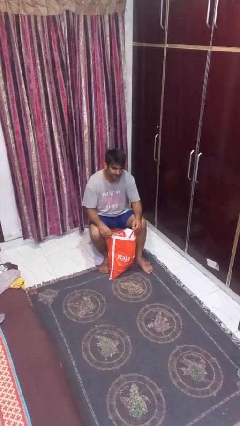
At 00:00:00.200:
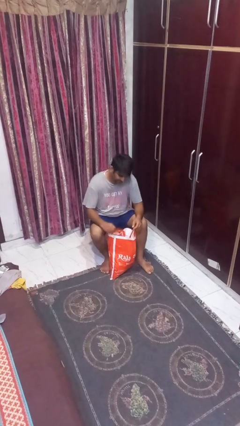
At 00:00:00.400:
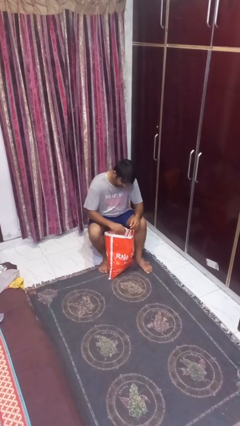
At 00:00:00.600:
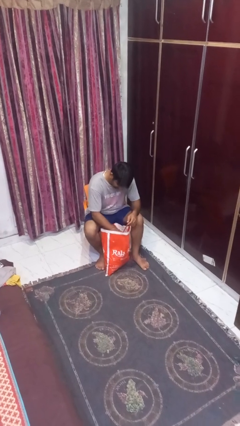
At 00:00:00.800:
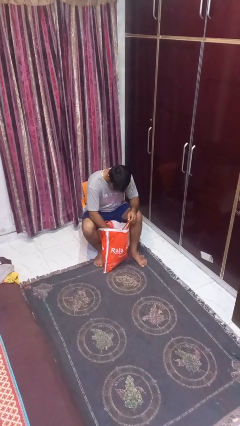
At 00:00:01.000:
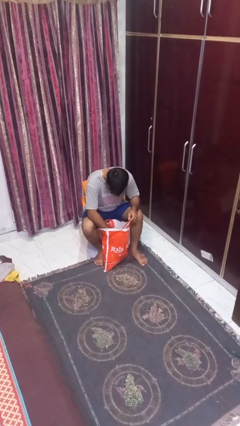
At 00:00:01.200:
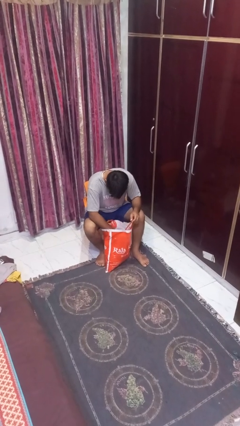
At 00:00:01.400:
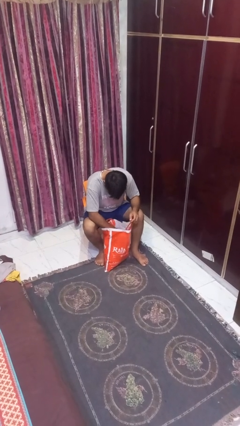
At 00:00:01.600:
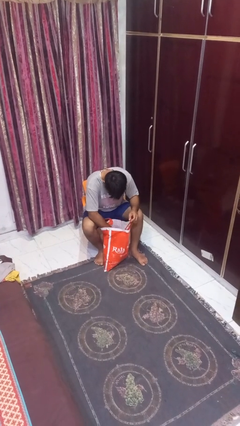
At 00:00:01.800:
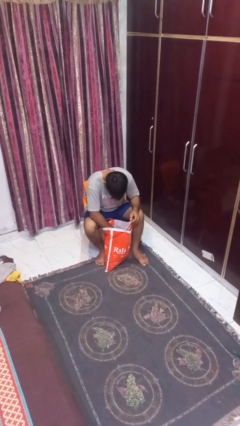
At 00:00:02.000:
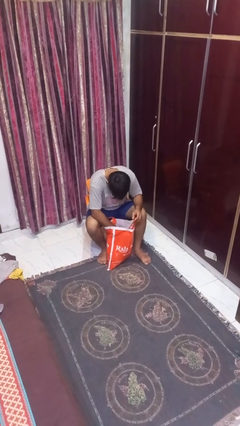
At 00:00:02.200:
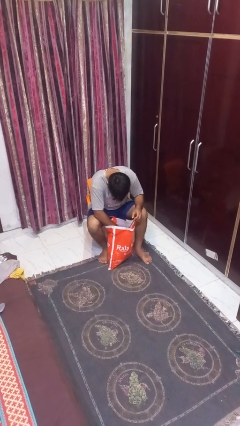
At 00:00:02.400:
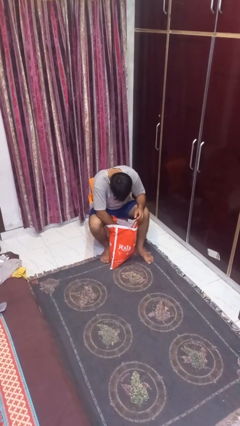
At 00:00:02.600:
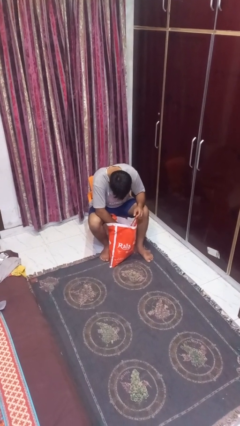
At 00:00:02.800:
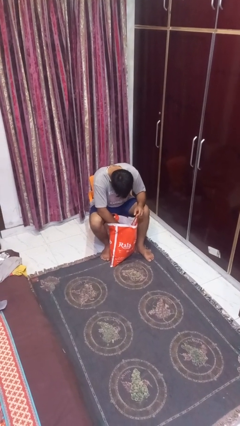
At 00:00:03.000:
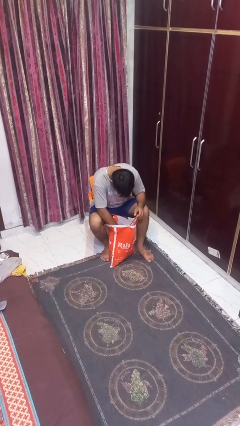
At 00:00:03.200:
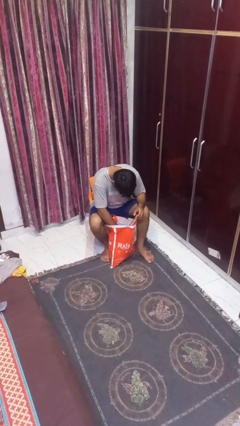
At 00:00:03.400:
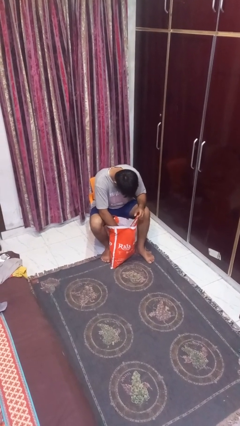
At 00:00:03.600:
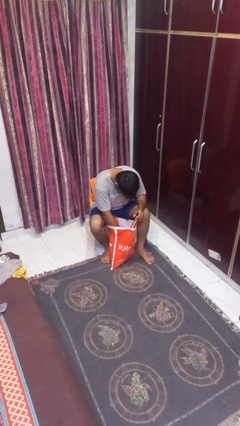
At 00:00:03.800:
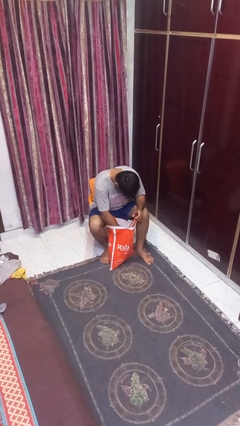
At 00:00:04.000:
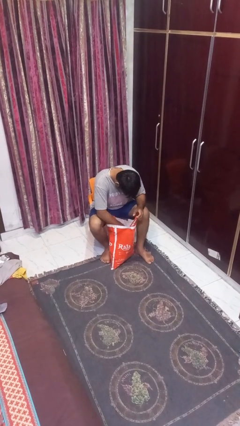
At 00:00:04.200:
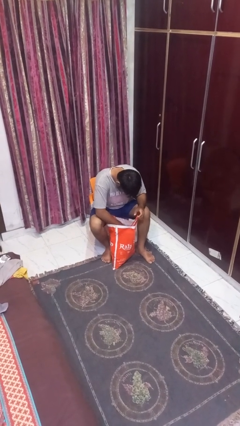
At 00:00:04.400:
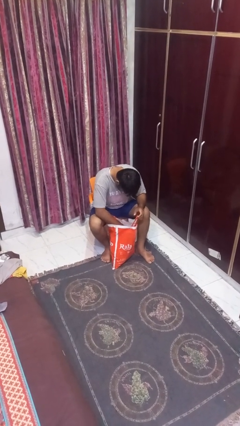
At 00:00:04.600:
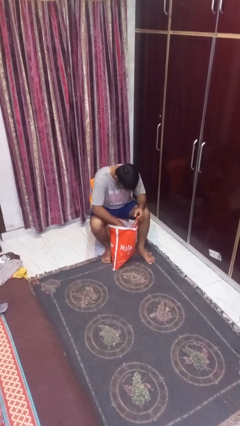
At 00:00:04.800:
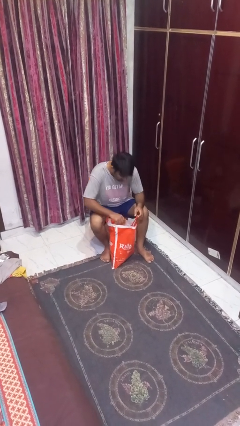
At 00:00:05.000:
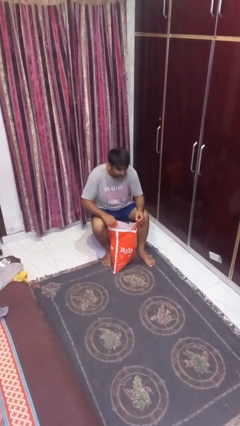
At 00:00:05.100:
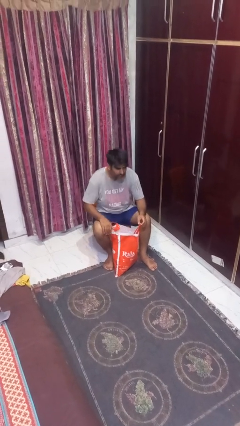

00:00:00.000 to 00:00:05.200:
person searches in bag

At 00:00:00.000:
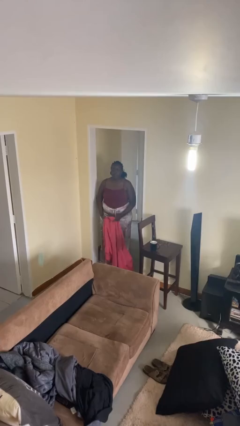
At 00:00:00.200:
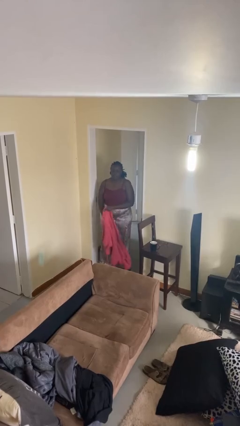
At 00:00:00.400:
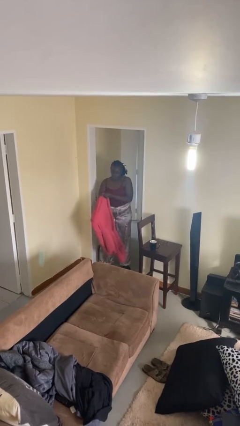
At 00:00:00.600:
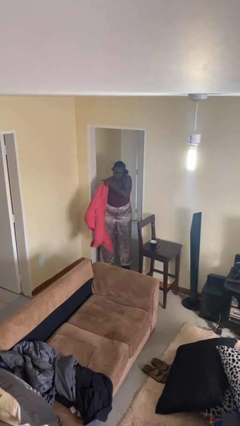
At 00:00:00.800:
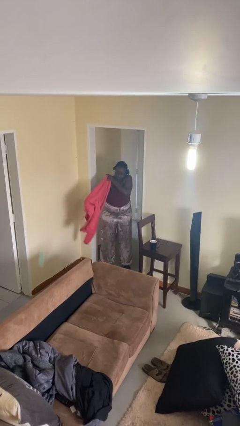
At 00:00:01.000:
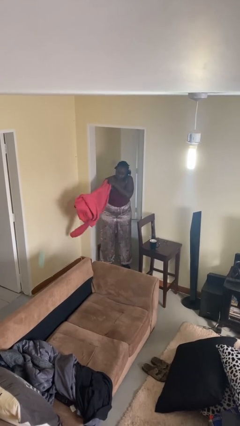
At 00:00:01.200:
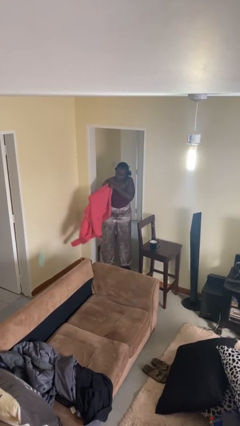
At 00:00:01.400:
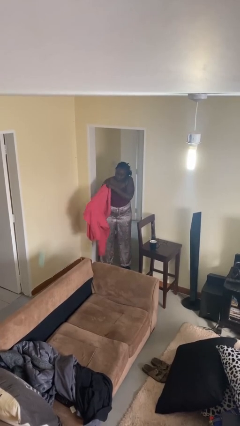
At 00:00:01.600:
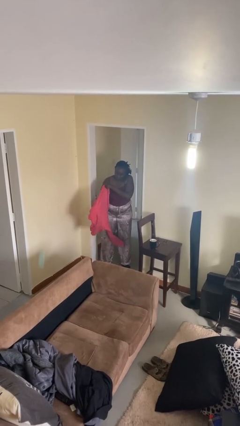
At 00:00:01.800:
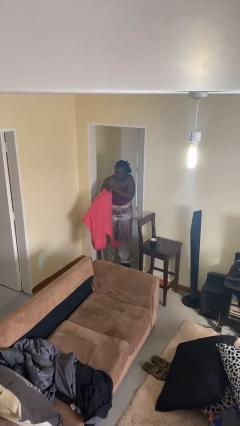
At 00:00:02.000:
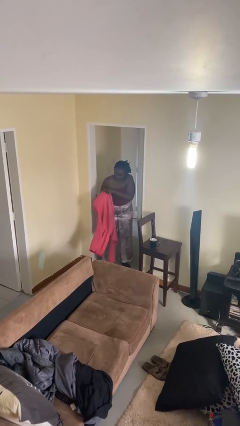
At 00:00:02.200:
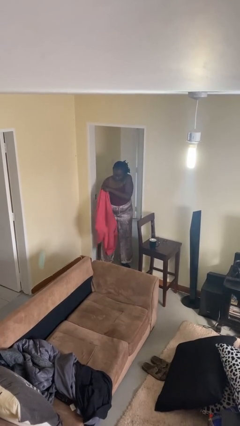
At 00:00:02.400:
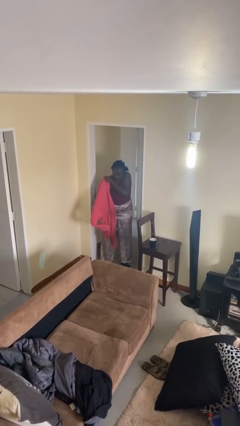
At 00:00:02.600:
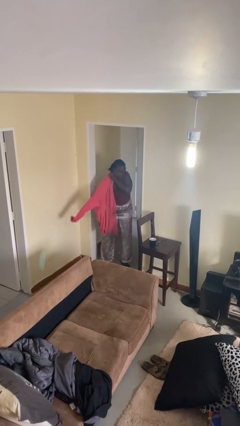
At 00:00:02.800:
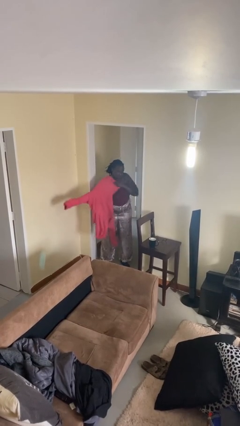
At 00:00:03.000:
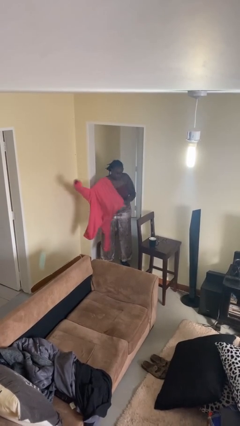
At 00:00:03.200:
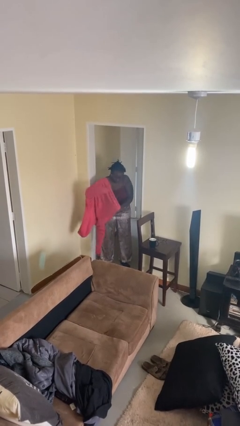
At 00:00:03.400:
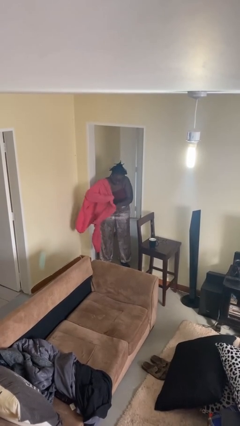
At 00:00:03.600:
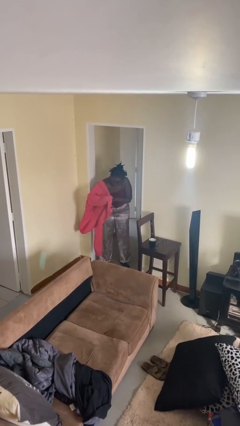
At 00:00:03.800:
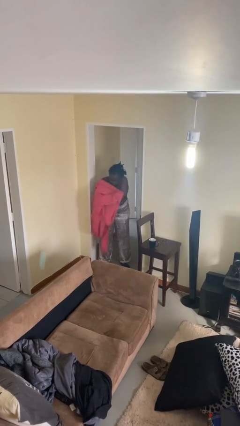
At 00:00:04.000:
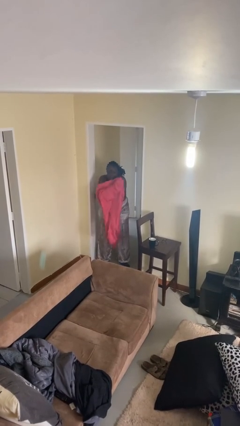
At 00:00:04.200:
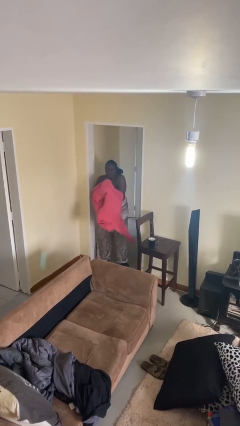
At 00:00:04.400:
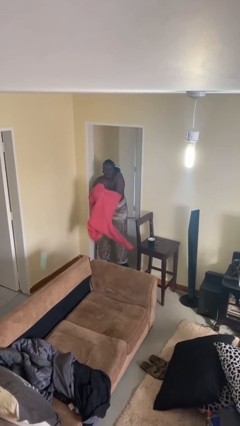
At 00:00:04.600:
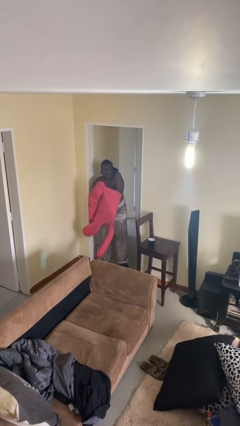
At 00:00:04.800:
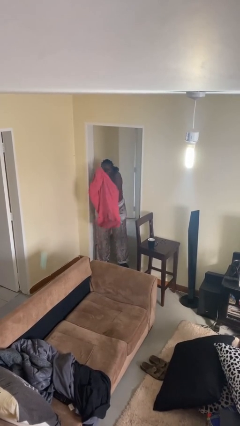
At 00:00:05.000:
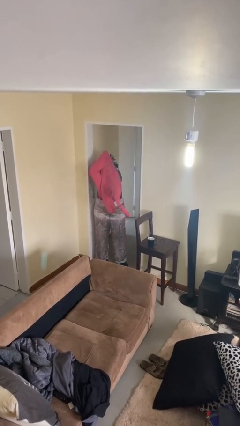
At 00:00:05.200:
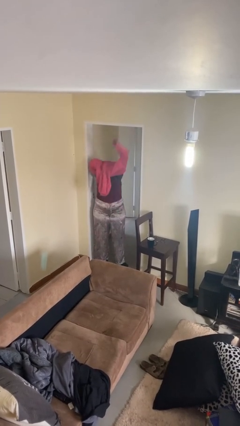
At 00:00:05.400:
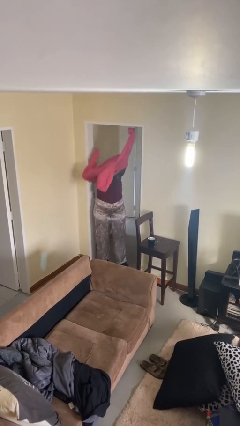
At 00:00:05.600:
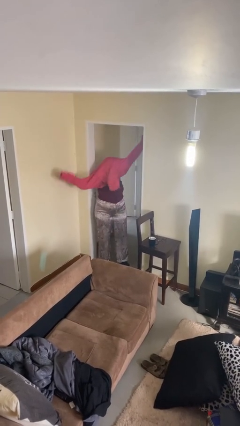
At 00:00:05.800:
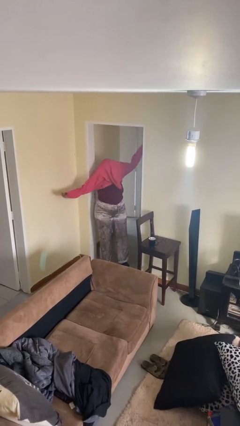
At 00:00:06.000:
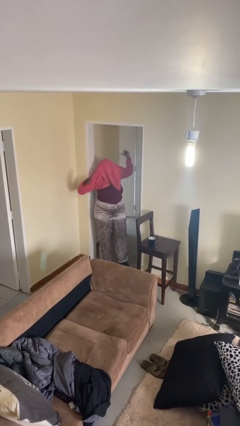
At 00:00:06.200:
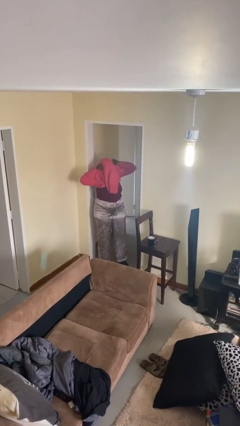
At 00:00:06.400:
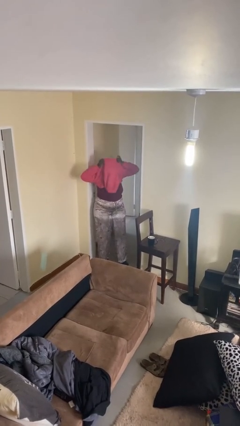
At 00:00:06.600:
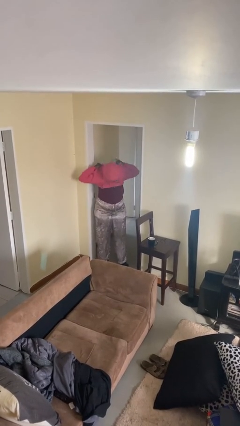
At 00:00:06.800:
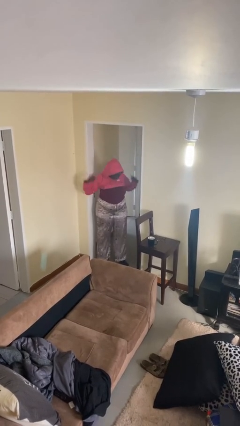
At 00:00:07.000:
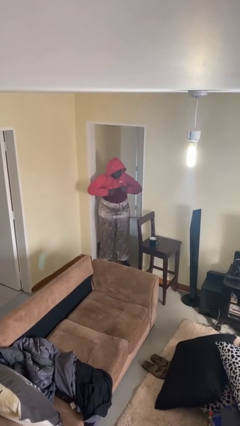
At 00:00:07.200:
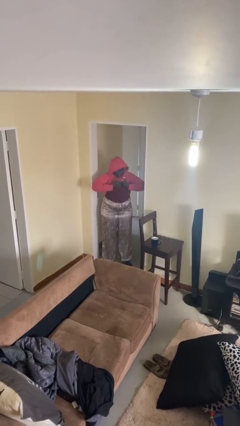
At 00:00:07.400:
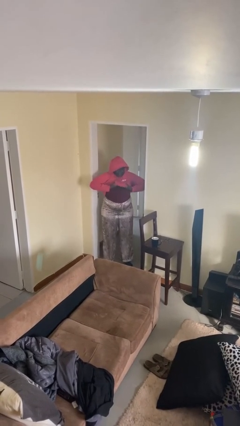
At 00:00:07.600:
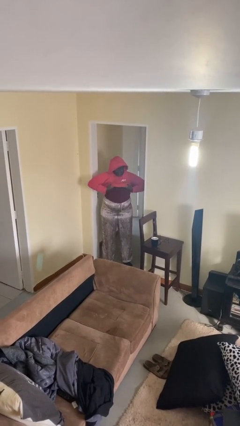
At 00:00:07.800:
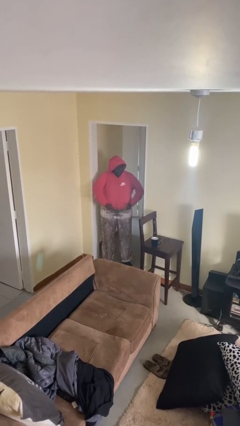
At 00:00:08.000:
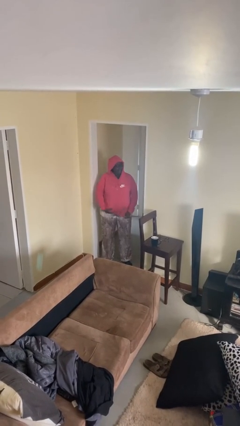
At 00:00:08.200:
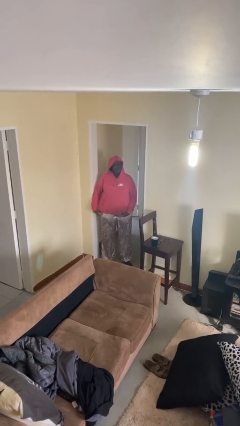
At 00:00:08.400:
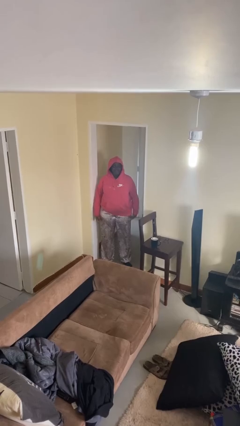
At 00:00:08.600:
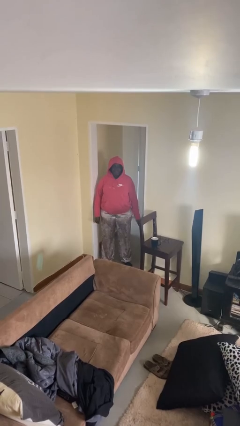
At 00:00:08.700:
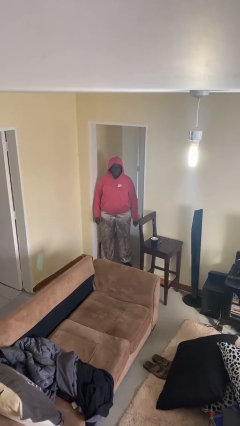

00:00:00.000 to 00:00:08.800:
person puts on hoodie

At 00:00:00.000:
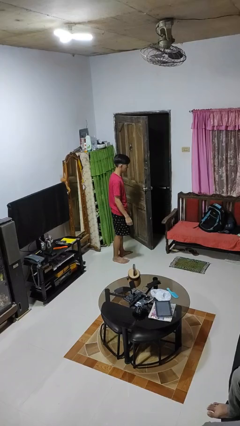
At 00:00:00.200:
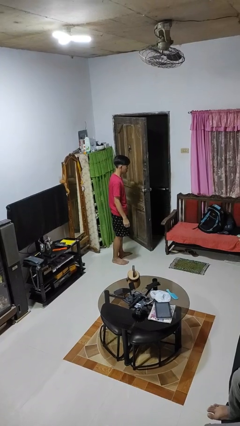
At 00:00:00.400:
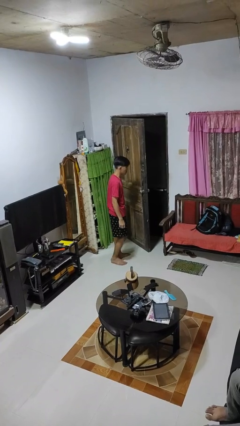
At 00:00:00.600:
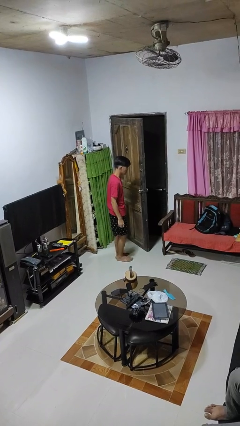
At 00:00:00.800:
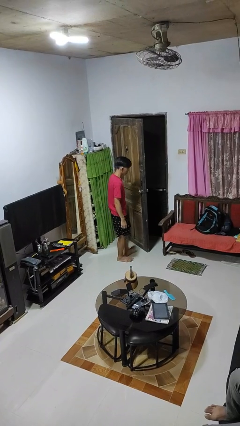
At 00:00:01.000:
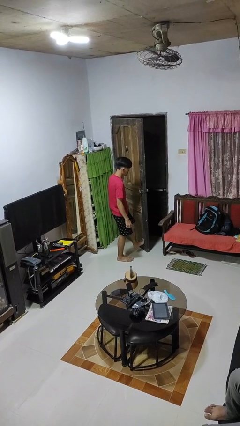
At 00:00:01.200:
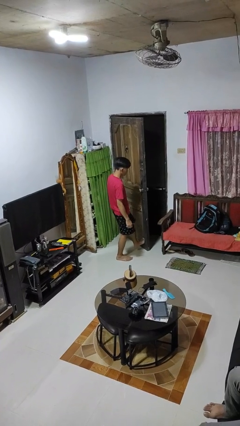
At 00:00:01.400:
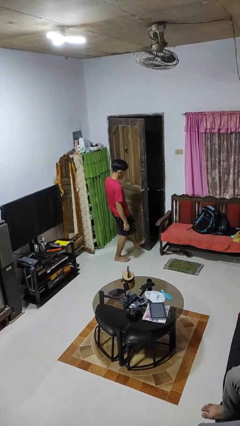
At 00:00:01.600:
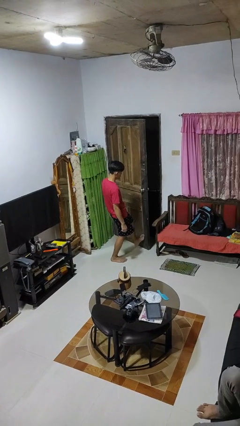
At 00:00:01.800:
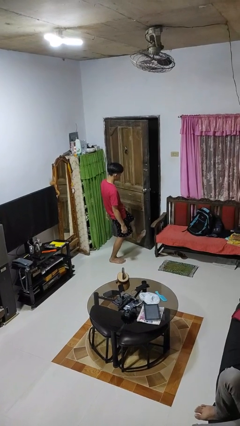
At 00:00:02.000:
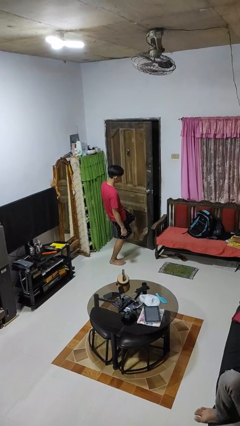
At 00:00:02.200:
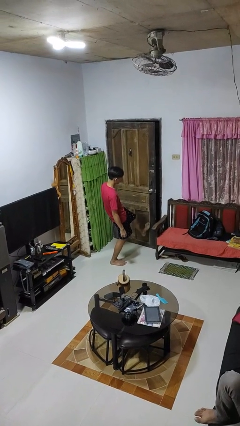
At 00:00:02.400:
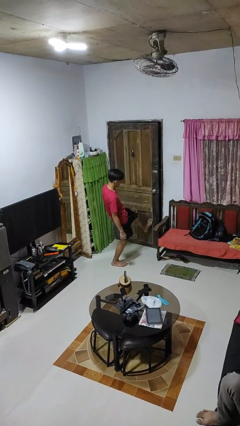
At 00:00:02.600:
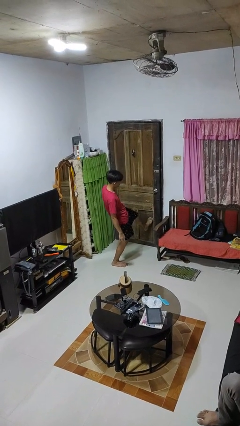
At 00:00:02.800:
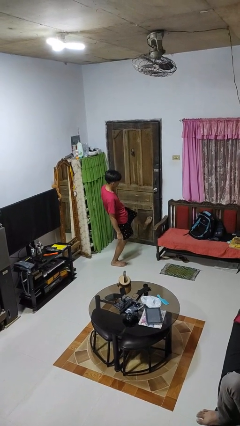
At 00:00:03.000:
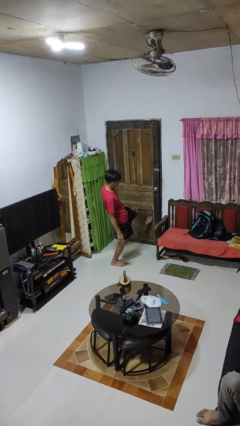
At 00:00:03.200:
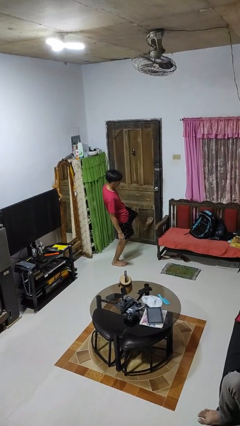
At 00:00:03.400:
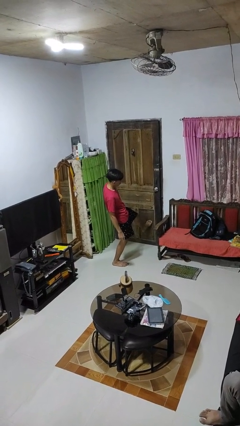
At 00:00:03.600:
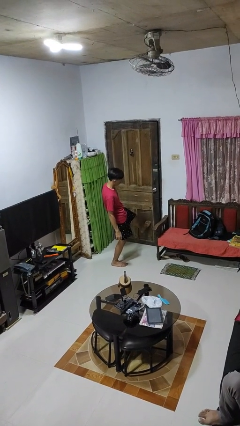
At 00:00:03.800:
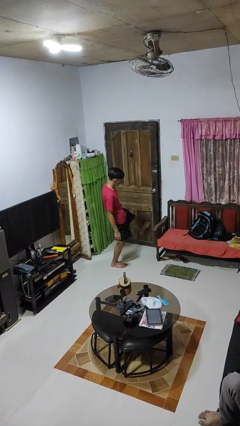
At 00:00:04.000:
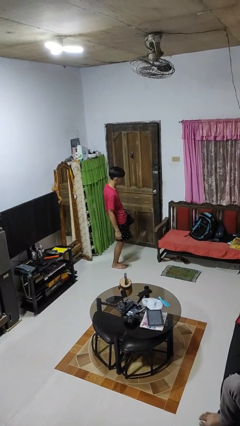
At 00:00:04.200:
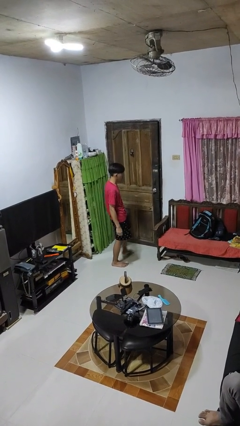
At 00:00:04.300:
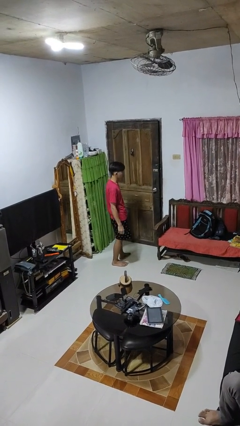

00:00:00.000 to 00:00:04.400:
person closes door with foot
